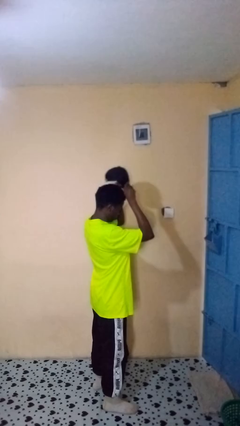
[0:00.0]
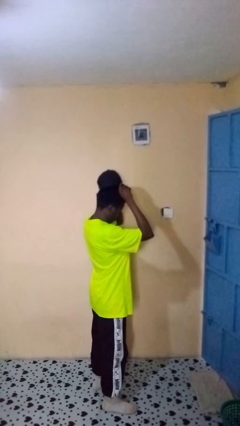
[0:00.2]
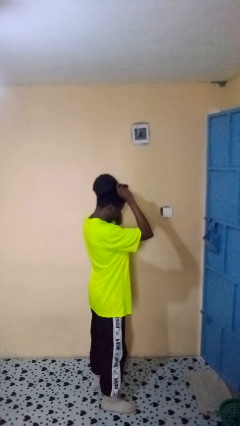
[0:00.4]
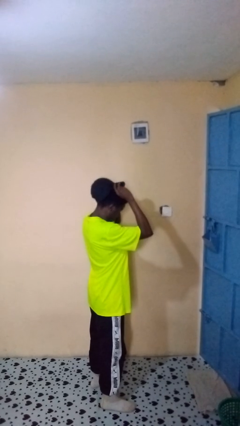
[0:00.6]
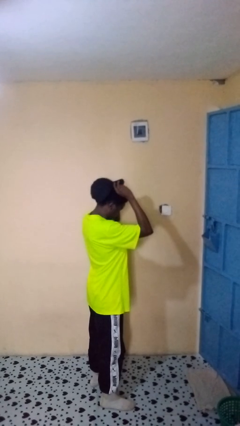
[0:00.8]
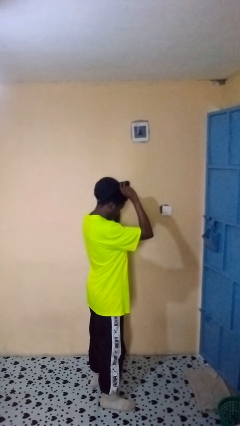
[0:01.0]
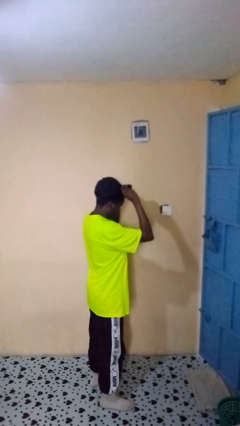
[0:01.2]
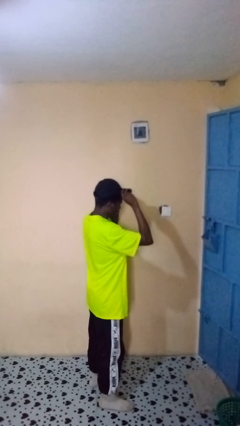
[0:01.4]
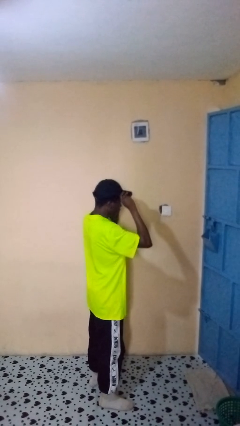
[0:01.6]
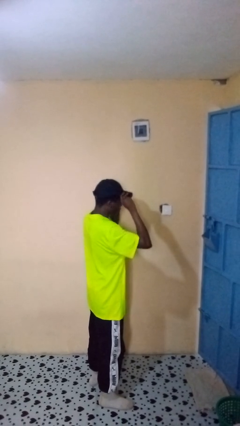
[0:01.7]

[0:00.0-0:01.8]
person puts on hat

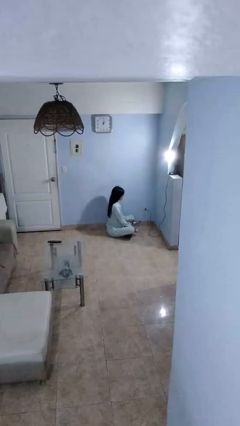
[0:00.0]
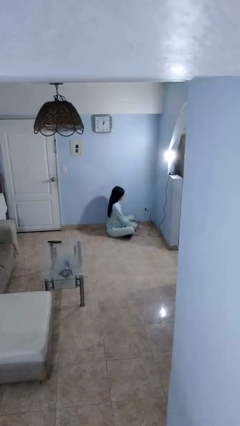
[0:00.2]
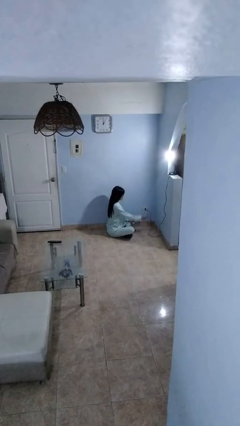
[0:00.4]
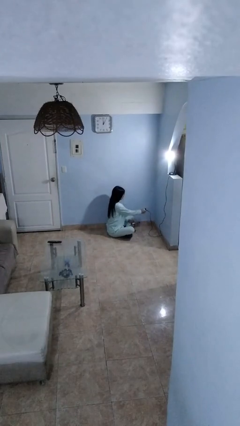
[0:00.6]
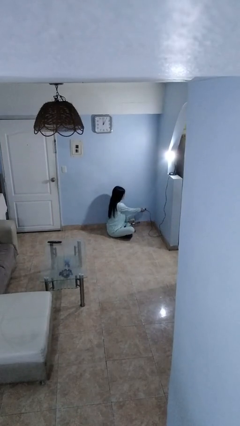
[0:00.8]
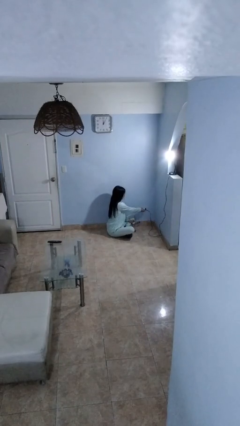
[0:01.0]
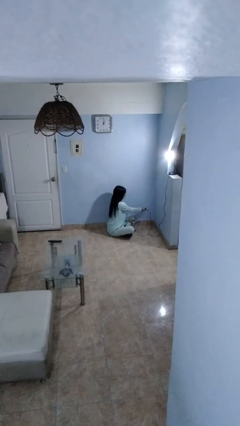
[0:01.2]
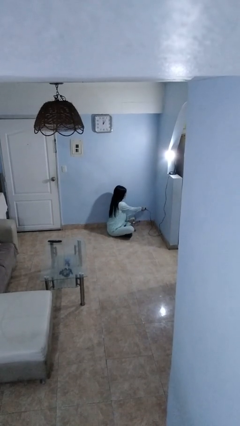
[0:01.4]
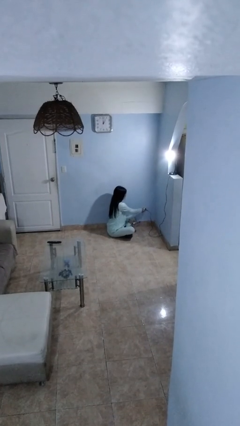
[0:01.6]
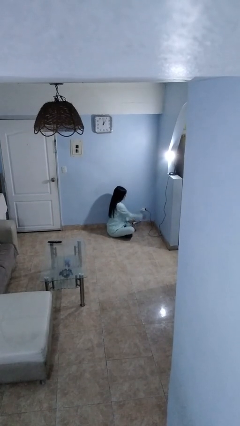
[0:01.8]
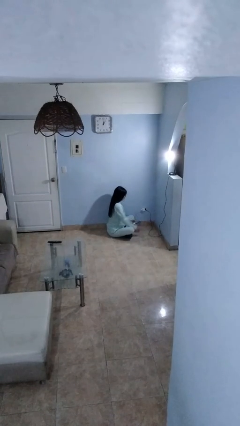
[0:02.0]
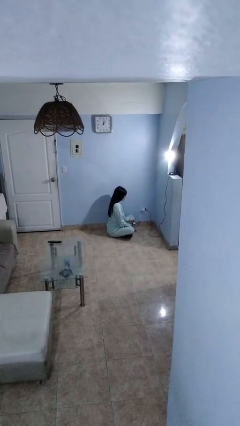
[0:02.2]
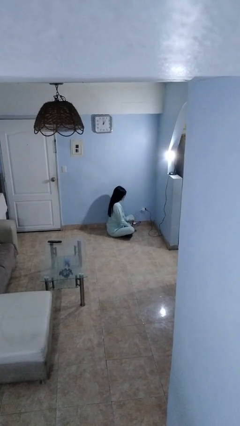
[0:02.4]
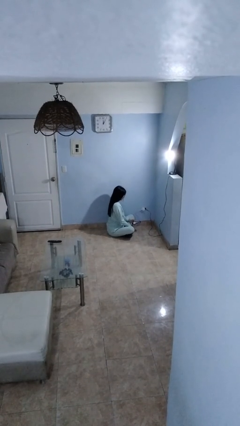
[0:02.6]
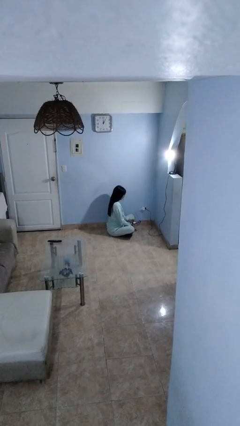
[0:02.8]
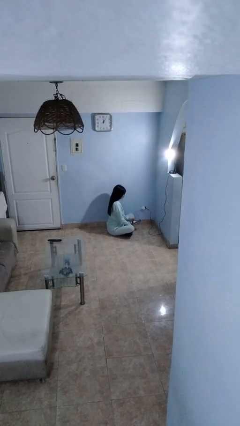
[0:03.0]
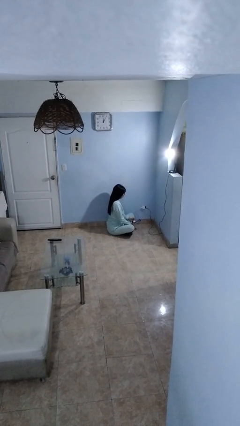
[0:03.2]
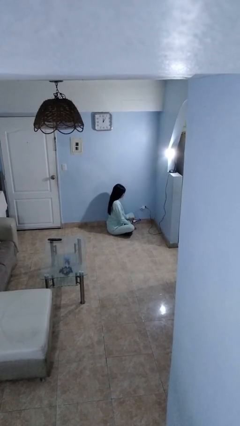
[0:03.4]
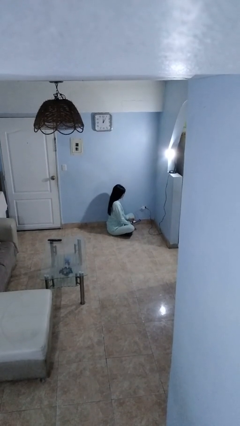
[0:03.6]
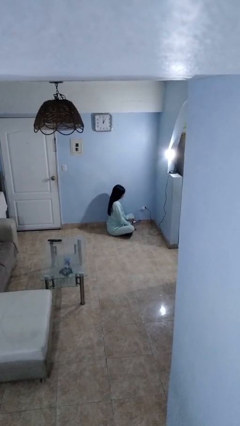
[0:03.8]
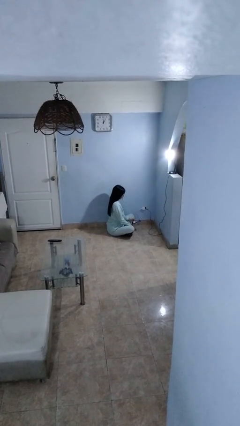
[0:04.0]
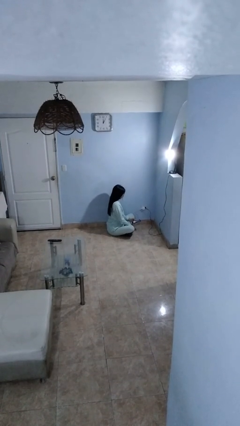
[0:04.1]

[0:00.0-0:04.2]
person plugs into electrical socket

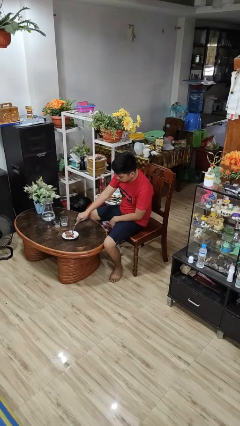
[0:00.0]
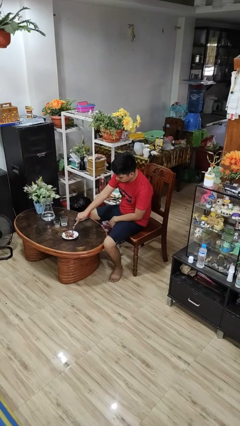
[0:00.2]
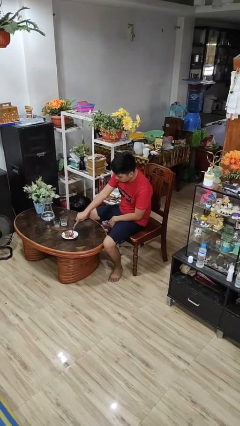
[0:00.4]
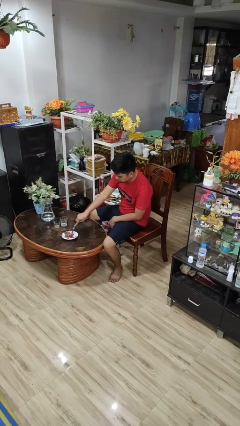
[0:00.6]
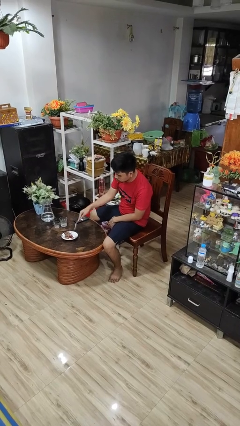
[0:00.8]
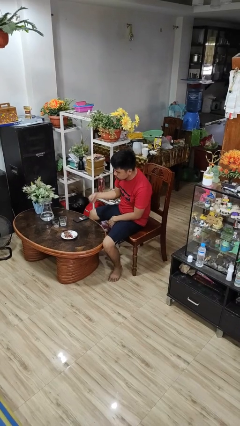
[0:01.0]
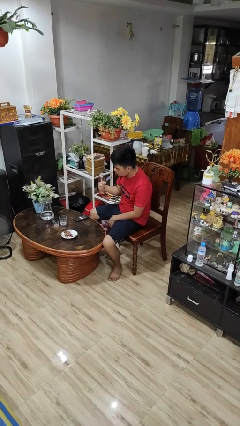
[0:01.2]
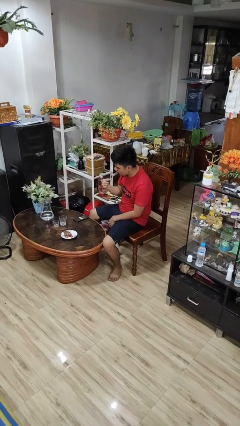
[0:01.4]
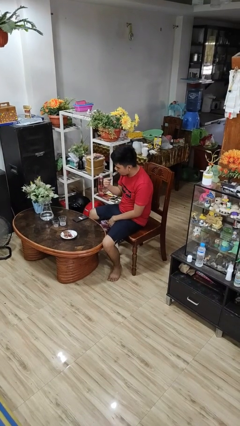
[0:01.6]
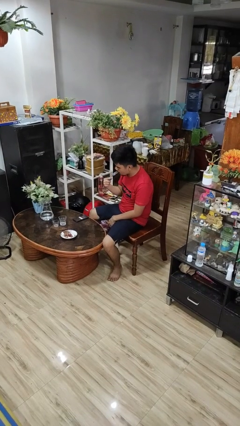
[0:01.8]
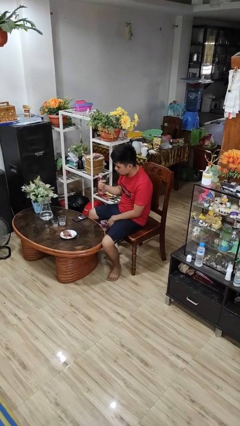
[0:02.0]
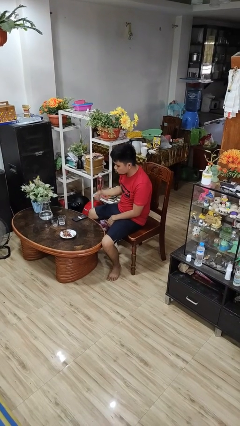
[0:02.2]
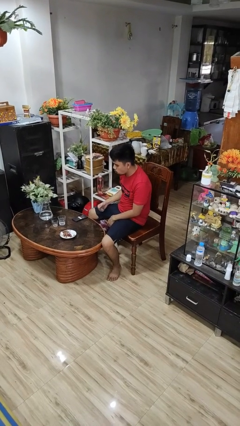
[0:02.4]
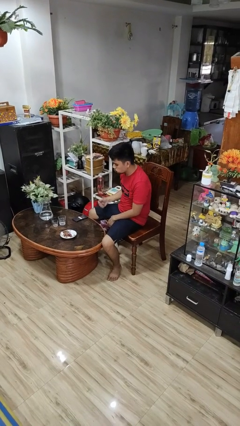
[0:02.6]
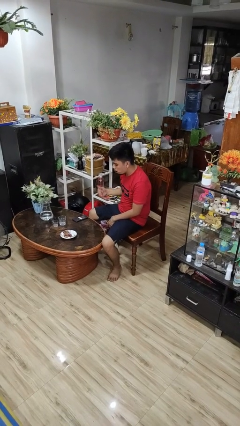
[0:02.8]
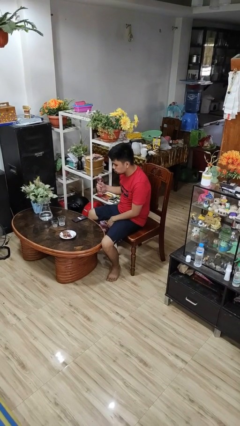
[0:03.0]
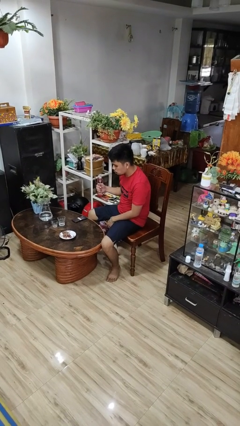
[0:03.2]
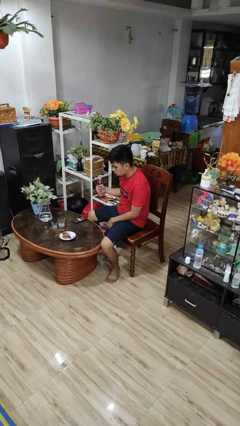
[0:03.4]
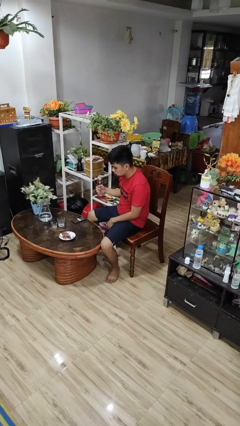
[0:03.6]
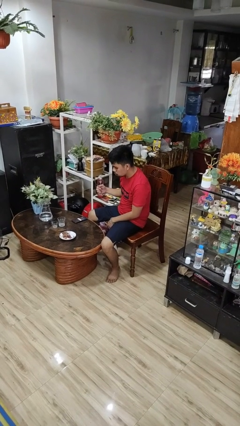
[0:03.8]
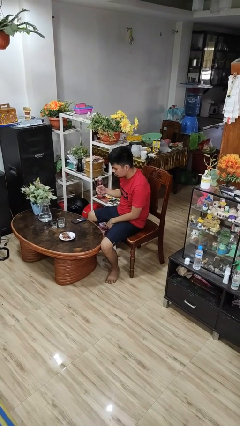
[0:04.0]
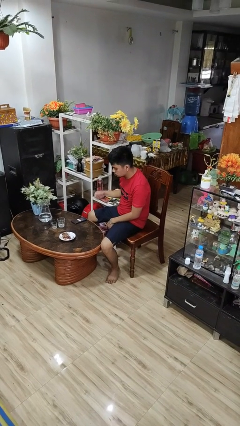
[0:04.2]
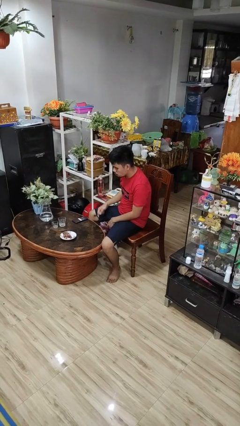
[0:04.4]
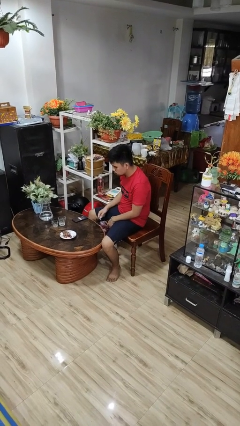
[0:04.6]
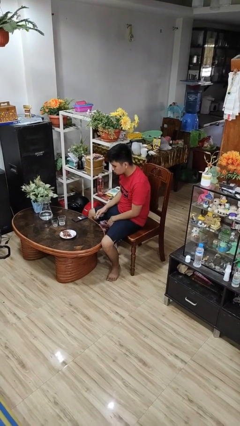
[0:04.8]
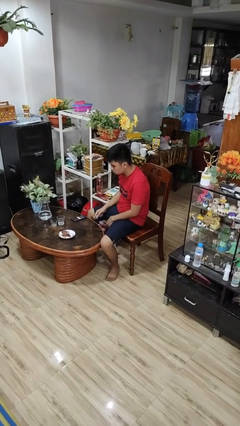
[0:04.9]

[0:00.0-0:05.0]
person eats with utensil

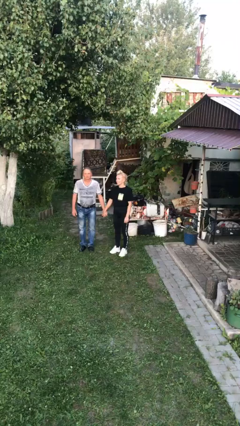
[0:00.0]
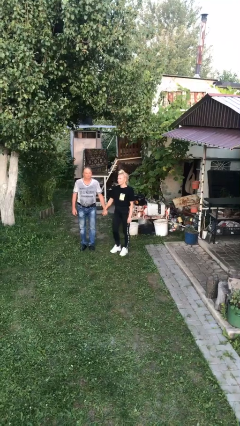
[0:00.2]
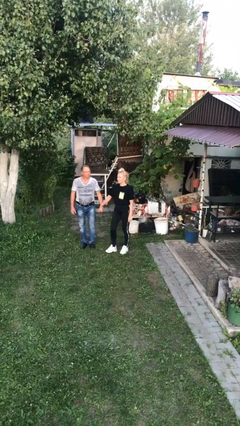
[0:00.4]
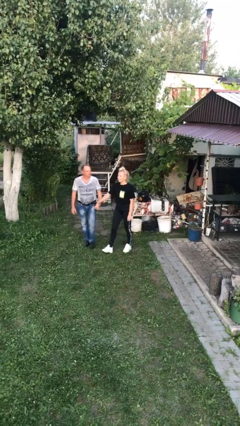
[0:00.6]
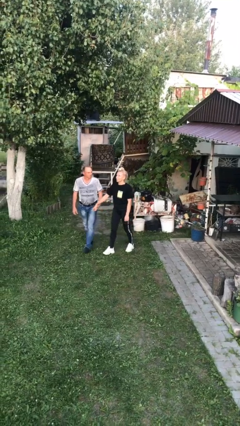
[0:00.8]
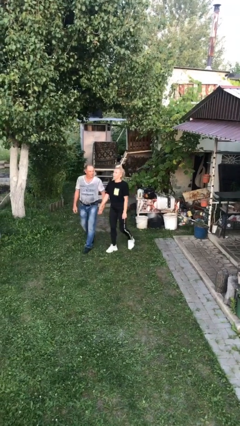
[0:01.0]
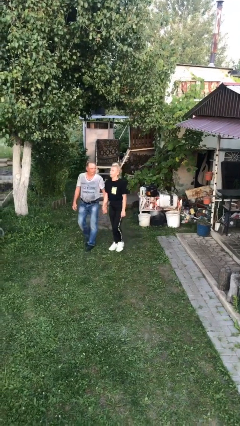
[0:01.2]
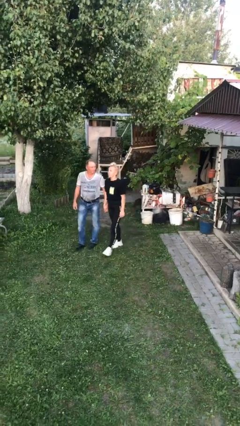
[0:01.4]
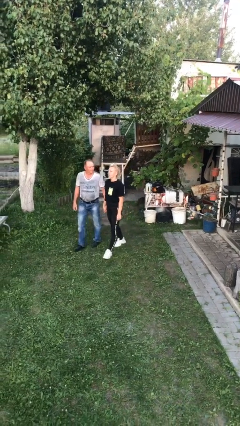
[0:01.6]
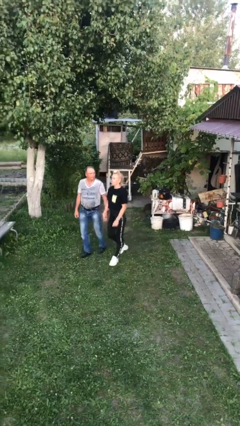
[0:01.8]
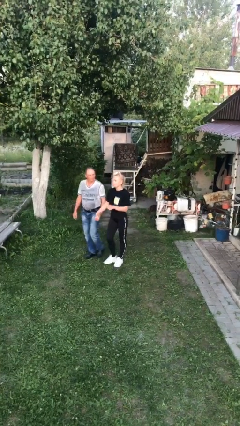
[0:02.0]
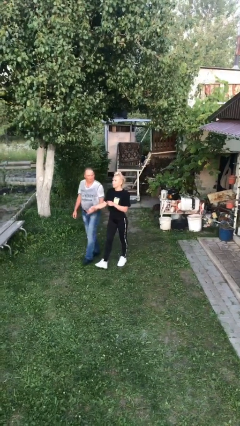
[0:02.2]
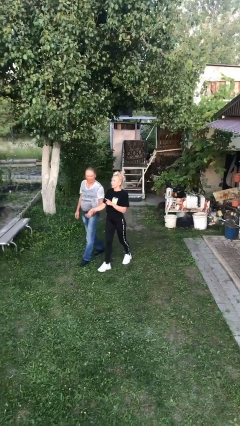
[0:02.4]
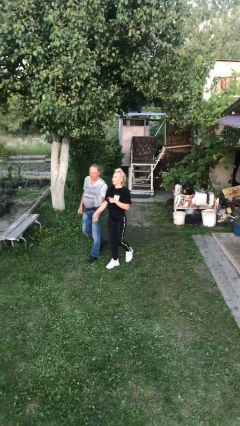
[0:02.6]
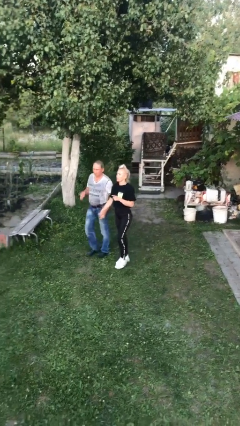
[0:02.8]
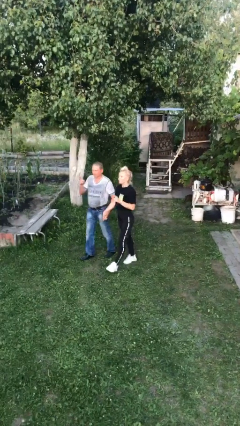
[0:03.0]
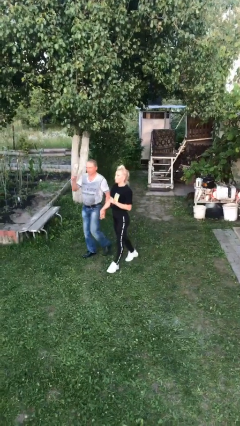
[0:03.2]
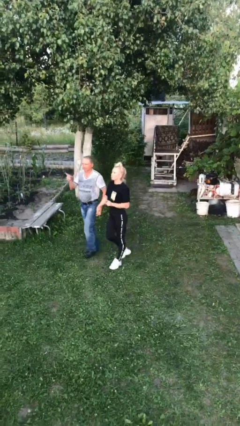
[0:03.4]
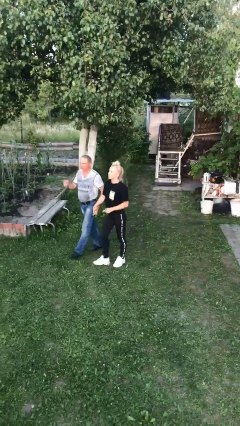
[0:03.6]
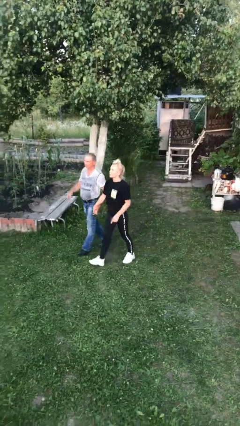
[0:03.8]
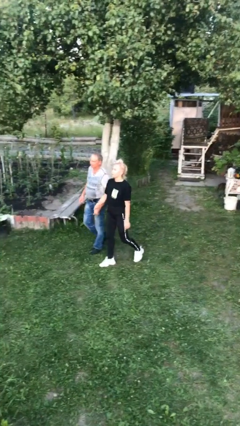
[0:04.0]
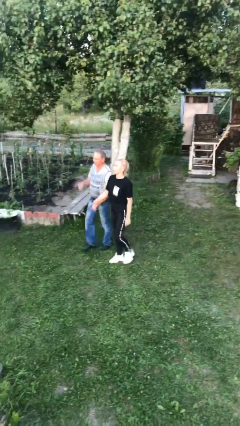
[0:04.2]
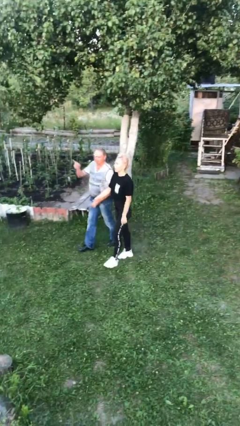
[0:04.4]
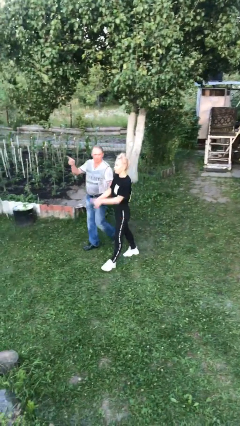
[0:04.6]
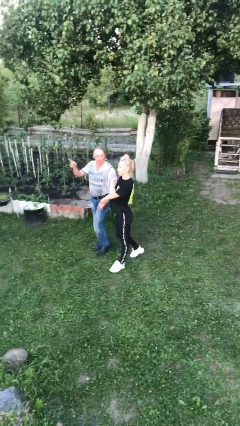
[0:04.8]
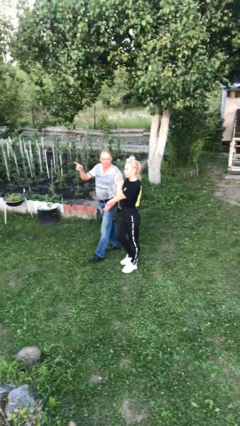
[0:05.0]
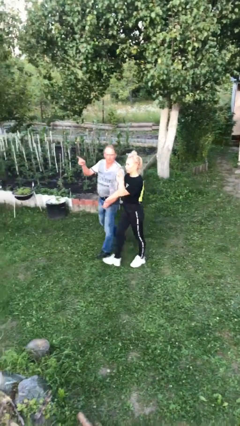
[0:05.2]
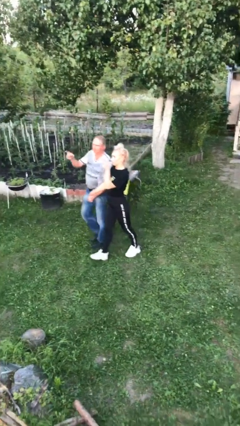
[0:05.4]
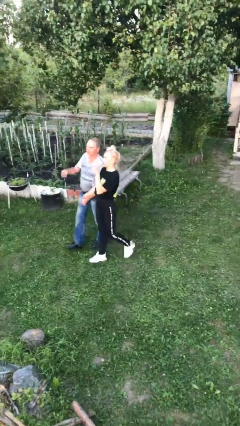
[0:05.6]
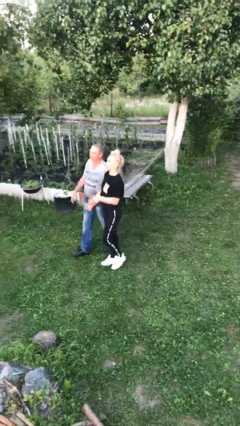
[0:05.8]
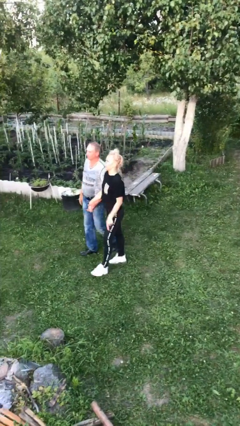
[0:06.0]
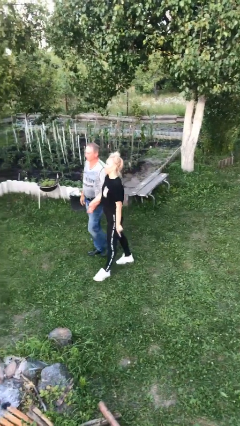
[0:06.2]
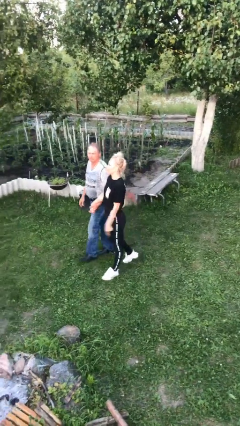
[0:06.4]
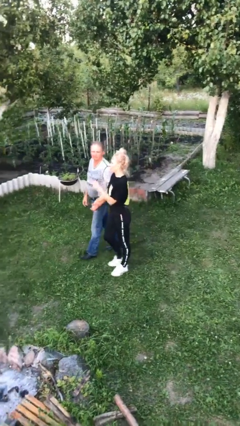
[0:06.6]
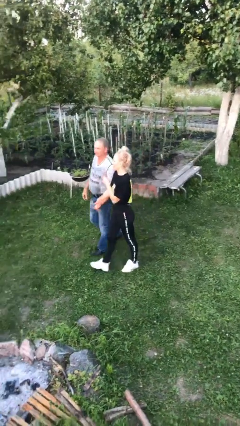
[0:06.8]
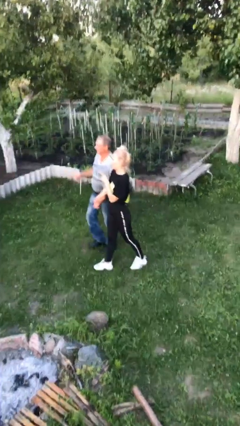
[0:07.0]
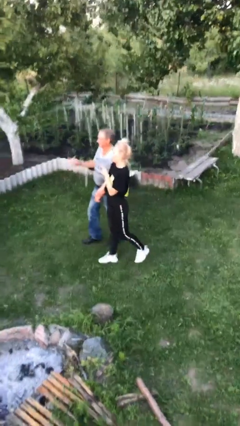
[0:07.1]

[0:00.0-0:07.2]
person holds hand
